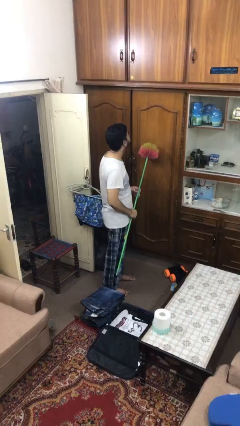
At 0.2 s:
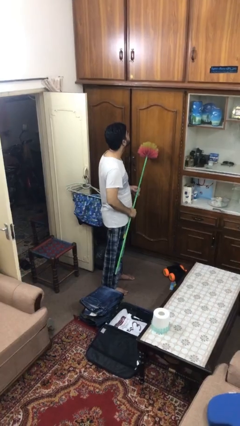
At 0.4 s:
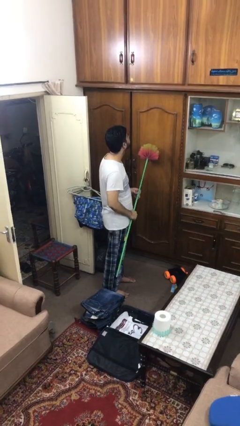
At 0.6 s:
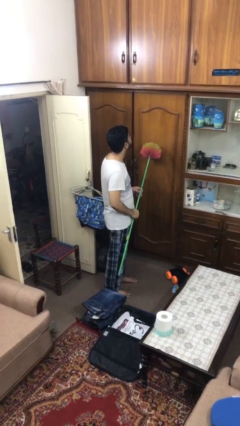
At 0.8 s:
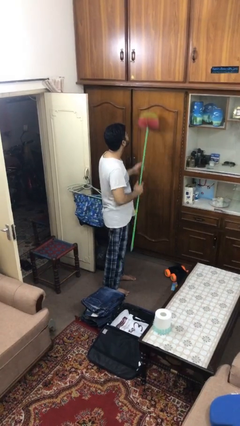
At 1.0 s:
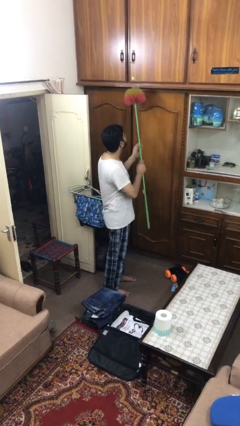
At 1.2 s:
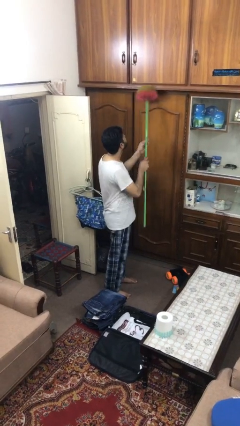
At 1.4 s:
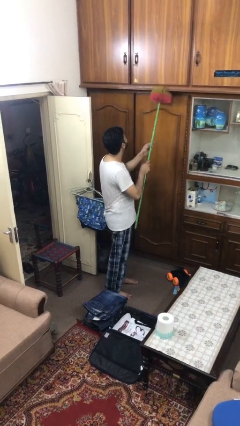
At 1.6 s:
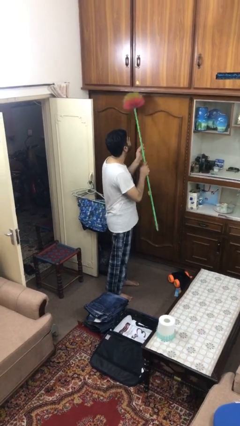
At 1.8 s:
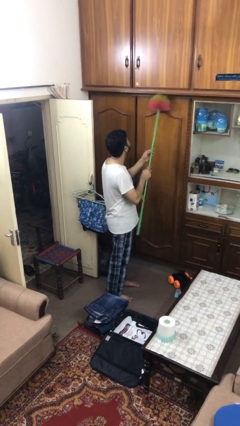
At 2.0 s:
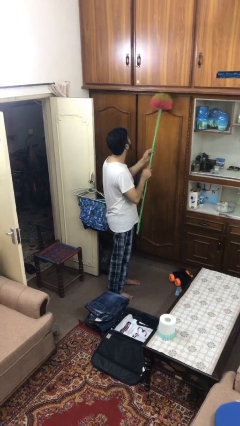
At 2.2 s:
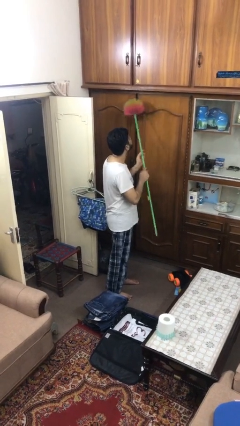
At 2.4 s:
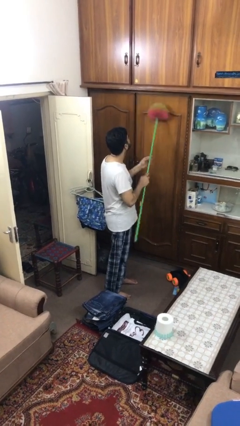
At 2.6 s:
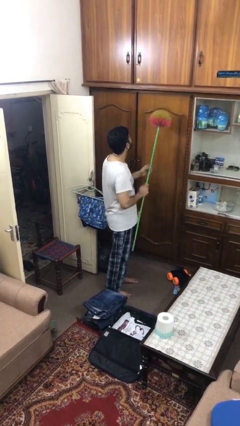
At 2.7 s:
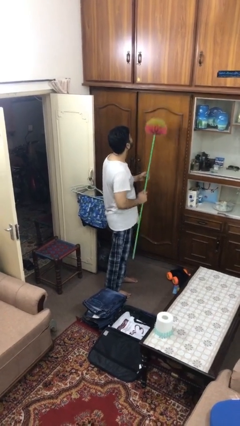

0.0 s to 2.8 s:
person dusts furniture

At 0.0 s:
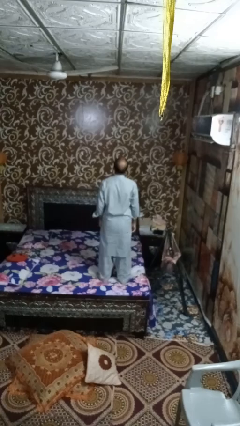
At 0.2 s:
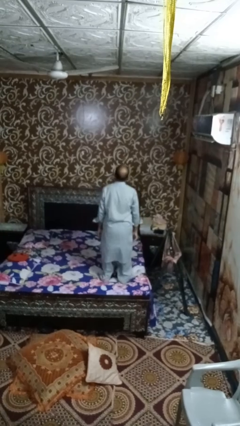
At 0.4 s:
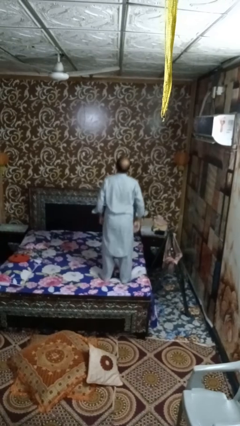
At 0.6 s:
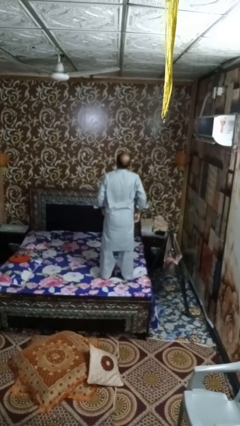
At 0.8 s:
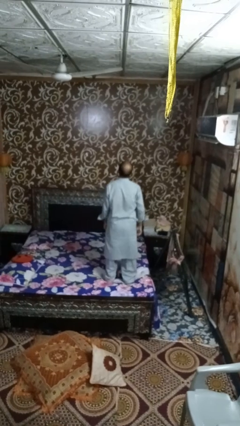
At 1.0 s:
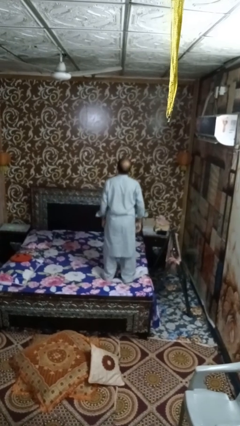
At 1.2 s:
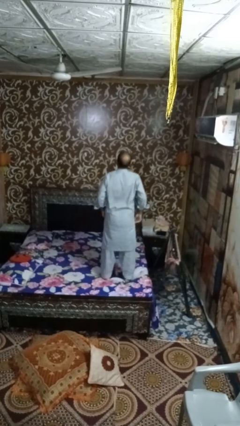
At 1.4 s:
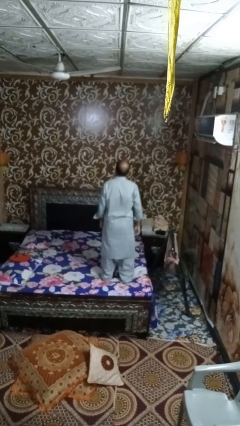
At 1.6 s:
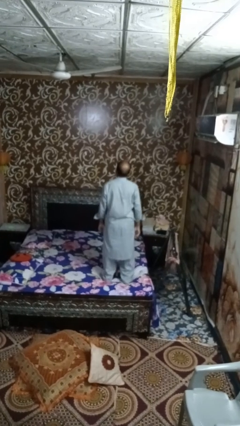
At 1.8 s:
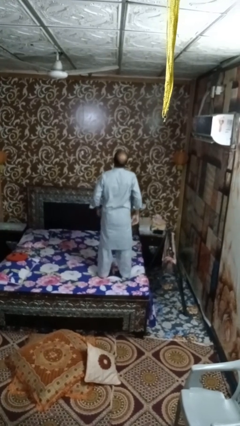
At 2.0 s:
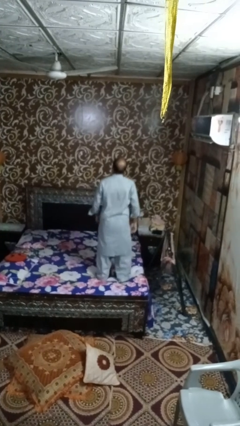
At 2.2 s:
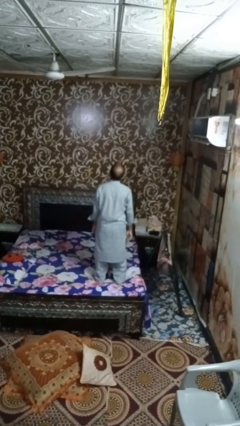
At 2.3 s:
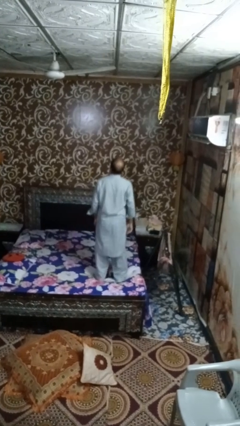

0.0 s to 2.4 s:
person jumps on bed

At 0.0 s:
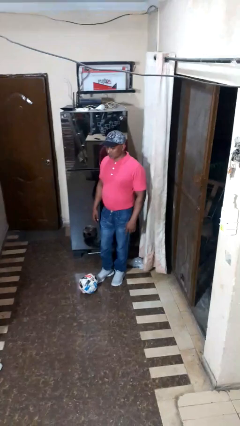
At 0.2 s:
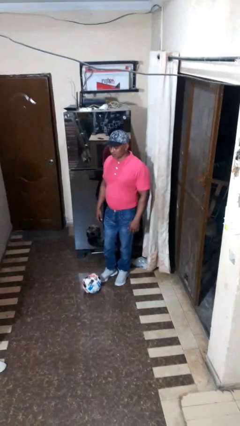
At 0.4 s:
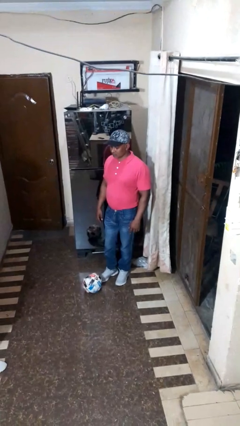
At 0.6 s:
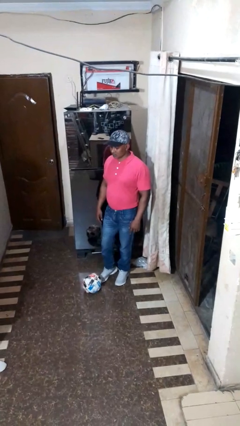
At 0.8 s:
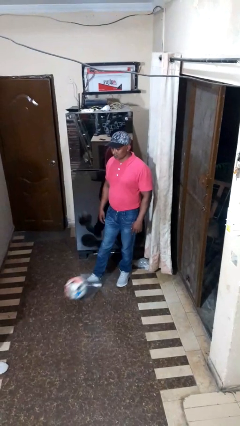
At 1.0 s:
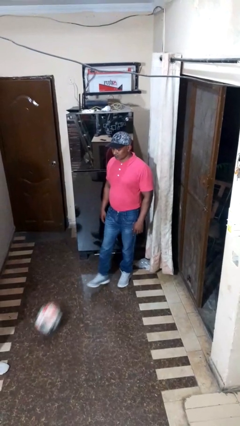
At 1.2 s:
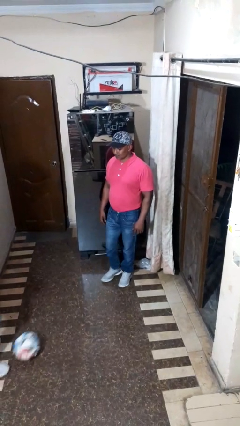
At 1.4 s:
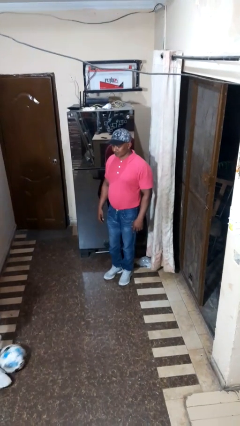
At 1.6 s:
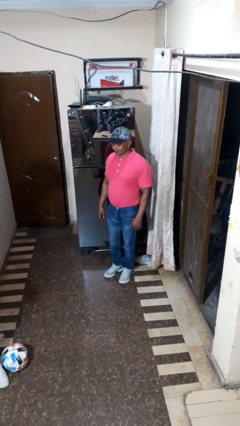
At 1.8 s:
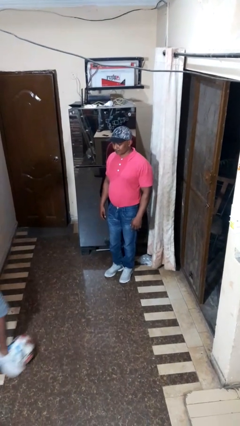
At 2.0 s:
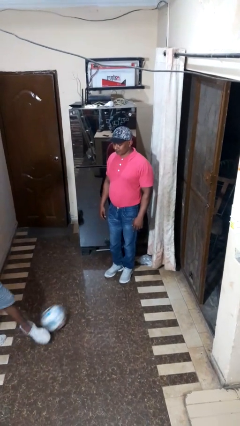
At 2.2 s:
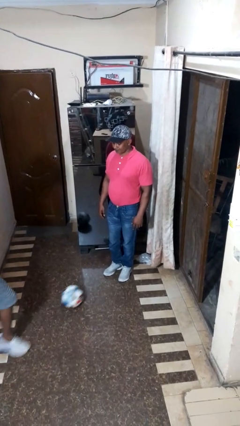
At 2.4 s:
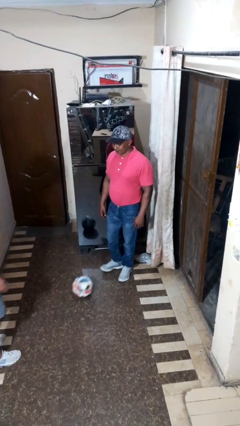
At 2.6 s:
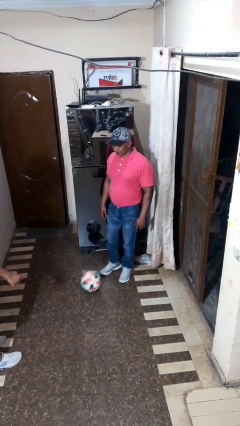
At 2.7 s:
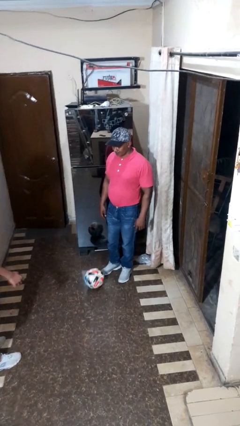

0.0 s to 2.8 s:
person kicks object to person

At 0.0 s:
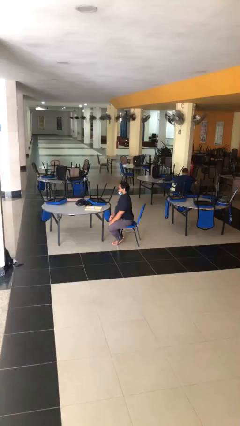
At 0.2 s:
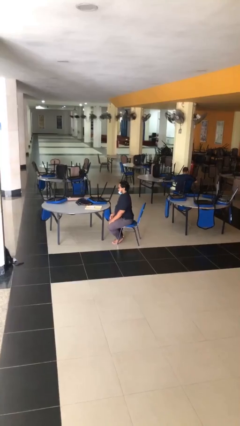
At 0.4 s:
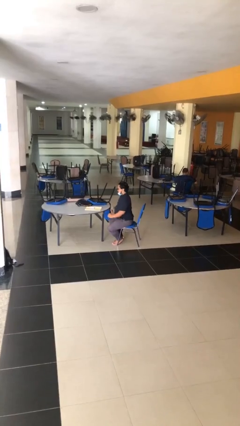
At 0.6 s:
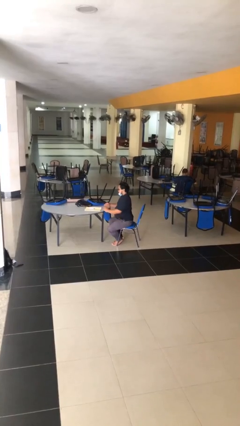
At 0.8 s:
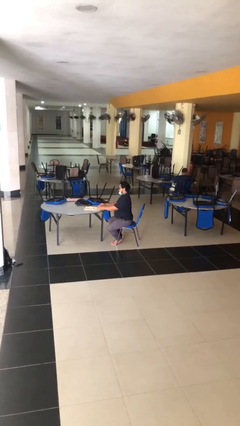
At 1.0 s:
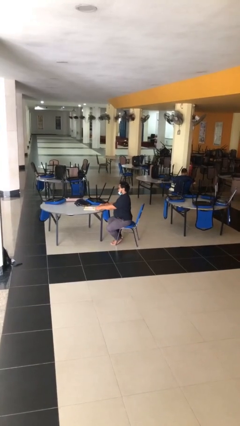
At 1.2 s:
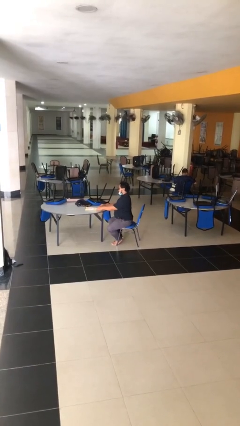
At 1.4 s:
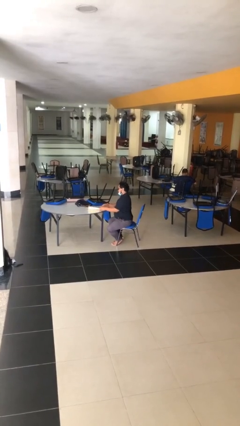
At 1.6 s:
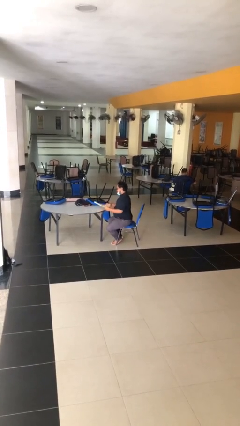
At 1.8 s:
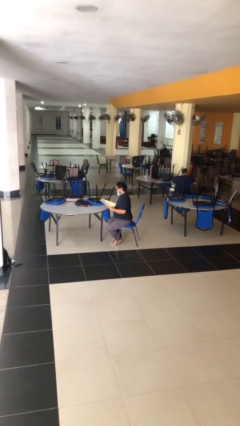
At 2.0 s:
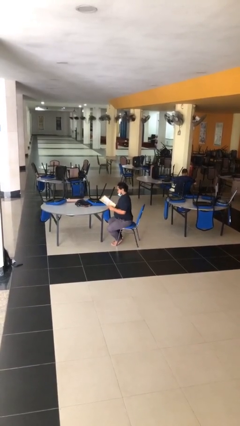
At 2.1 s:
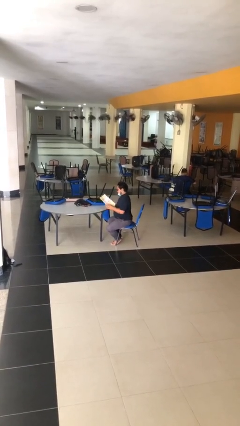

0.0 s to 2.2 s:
person picks up object from table

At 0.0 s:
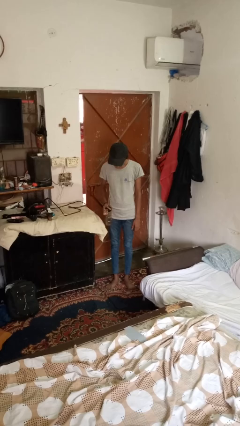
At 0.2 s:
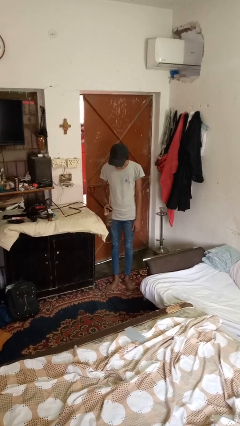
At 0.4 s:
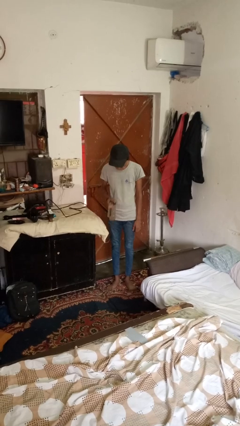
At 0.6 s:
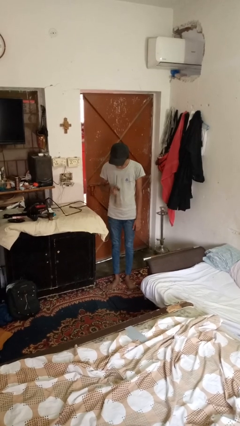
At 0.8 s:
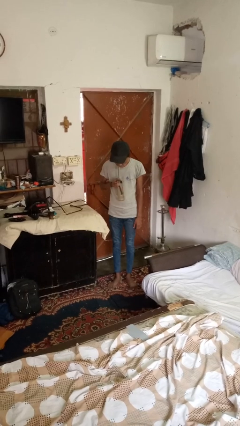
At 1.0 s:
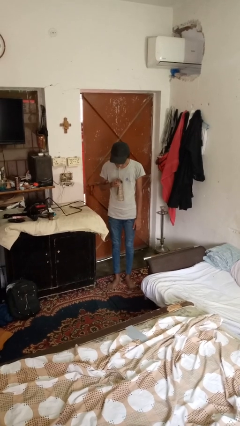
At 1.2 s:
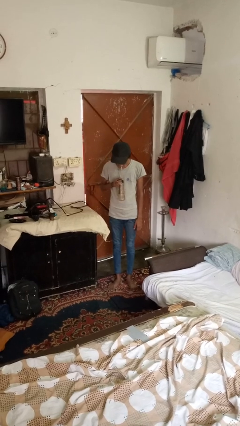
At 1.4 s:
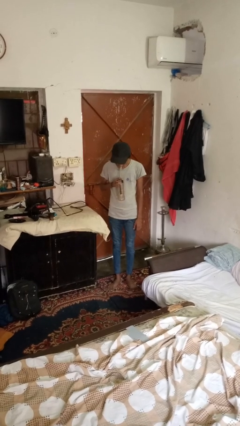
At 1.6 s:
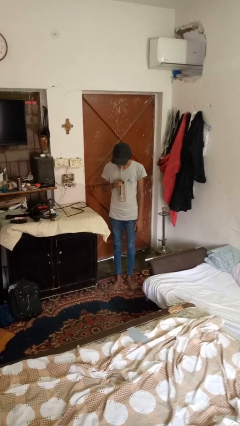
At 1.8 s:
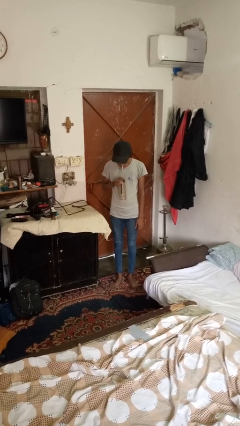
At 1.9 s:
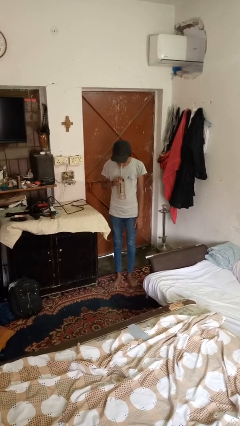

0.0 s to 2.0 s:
person drinks from straw

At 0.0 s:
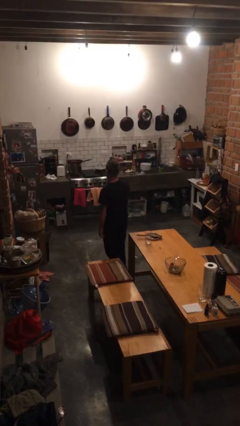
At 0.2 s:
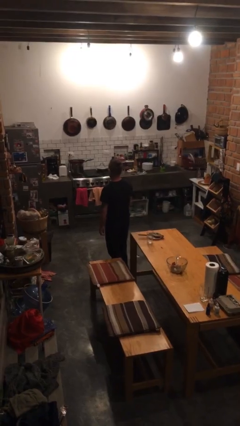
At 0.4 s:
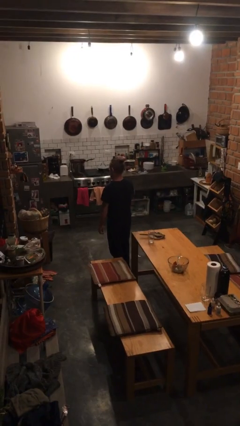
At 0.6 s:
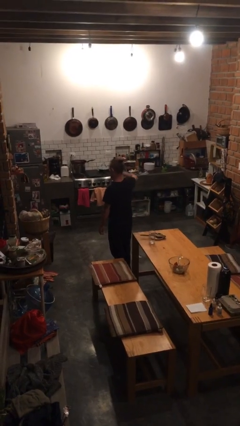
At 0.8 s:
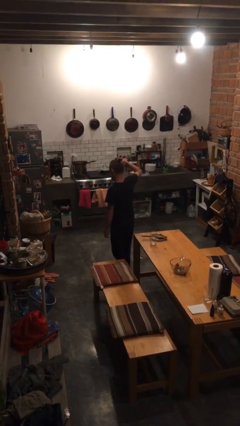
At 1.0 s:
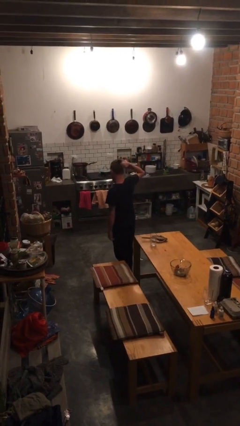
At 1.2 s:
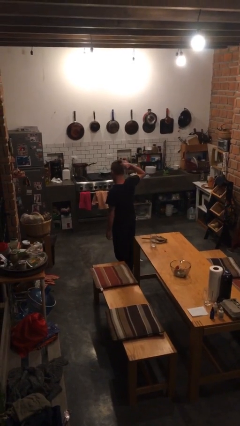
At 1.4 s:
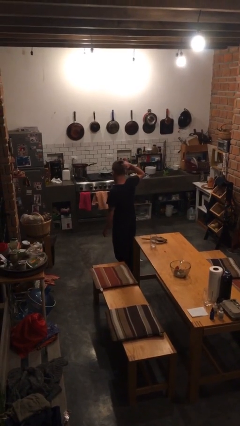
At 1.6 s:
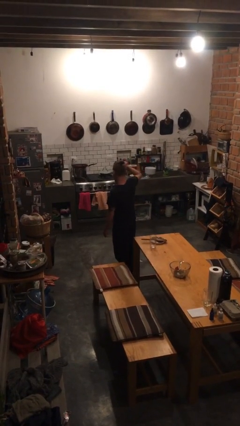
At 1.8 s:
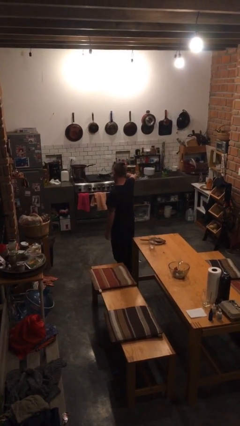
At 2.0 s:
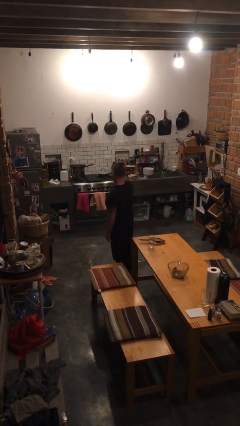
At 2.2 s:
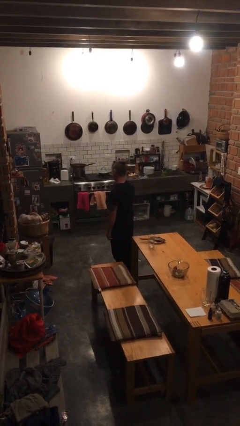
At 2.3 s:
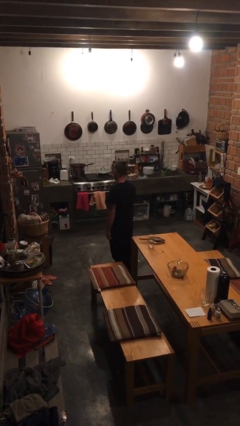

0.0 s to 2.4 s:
person salutes

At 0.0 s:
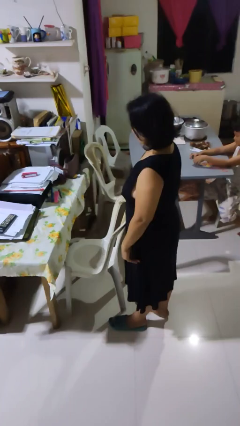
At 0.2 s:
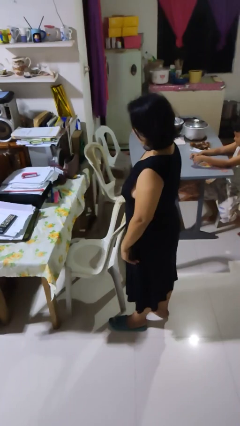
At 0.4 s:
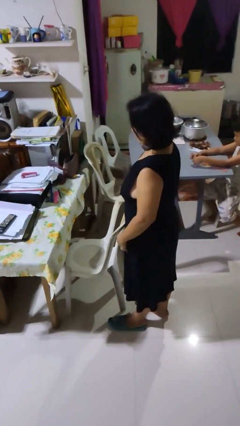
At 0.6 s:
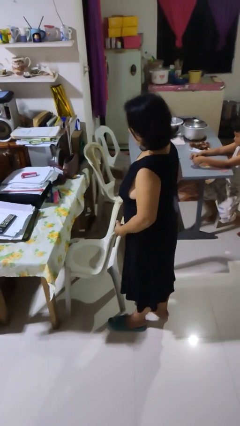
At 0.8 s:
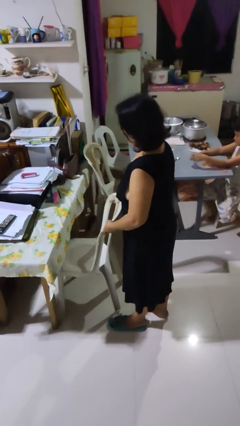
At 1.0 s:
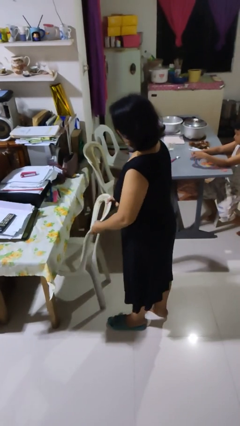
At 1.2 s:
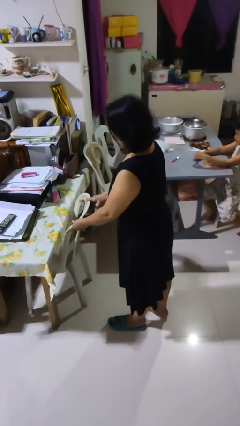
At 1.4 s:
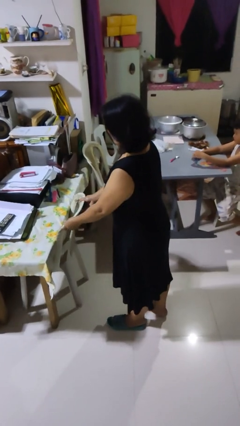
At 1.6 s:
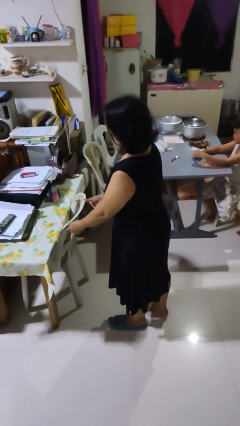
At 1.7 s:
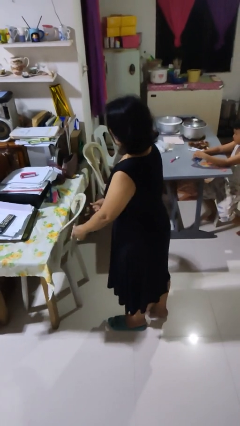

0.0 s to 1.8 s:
person pushes in chair

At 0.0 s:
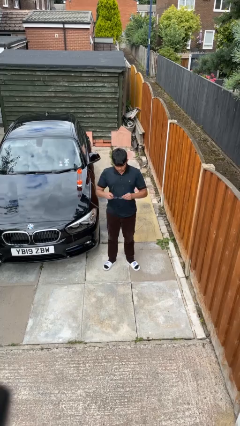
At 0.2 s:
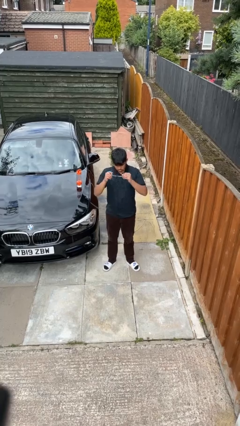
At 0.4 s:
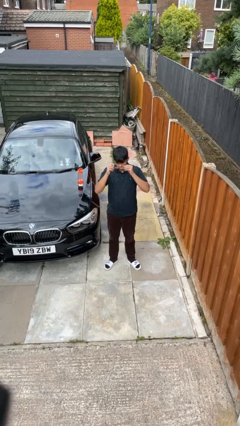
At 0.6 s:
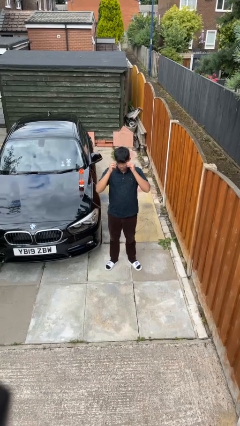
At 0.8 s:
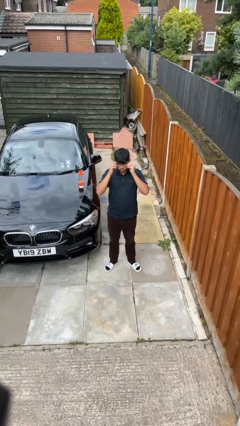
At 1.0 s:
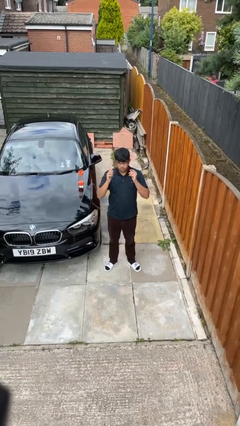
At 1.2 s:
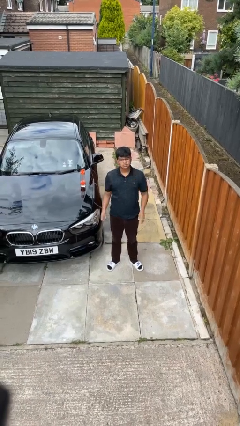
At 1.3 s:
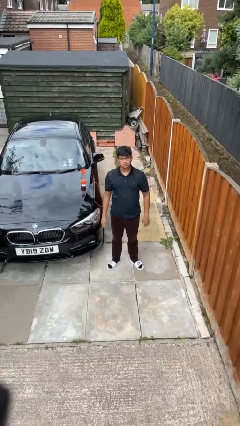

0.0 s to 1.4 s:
person puts on glasses
